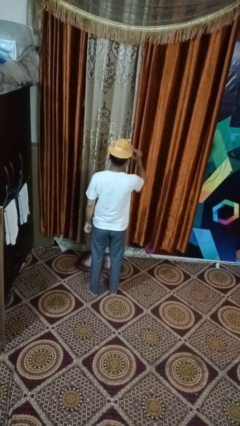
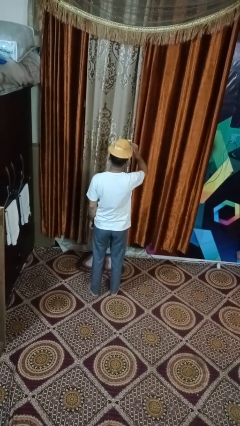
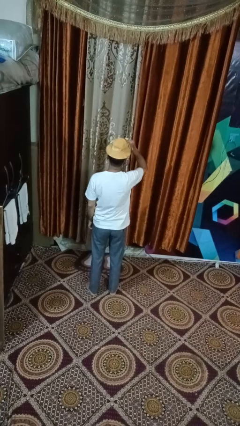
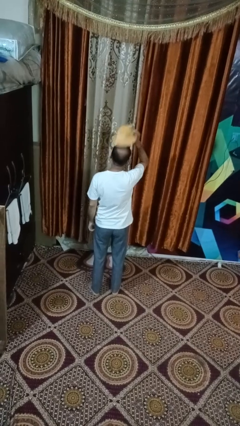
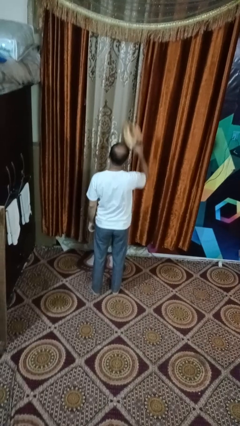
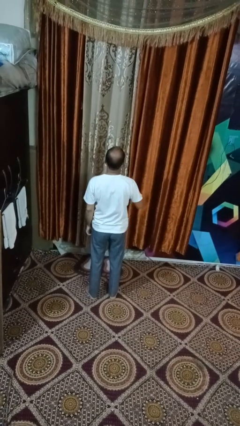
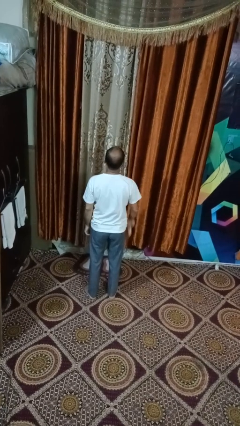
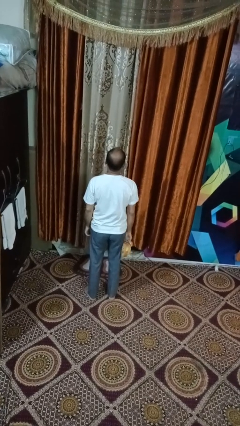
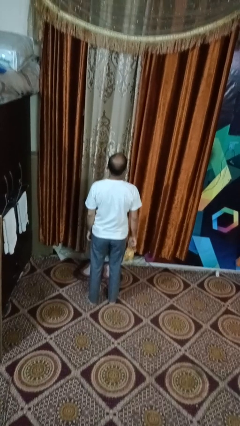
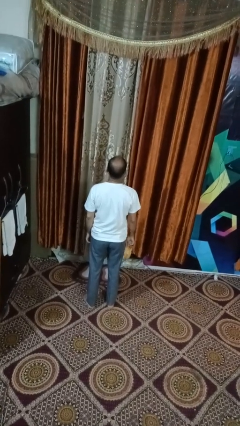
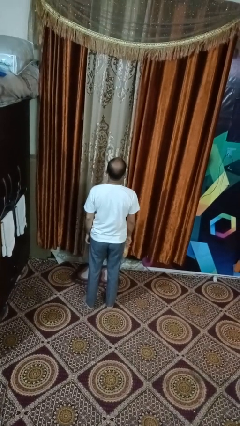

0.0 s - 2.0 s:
person takes off hat

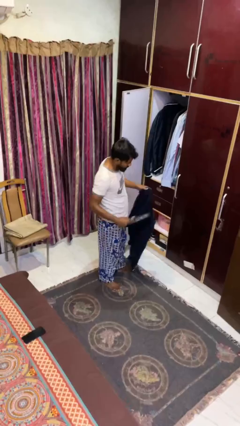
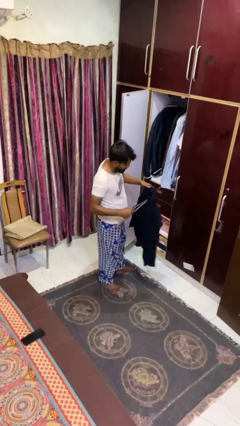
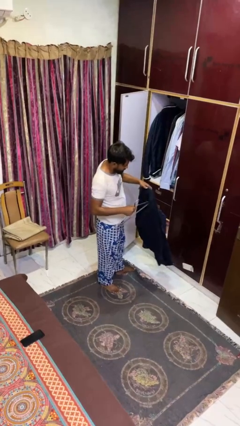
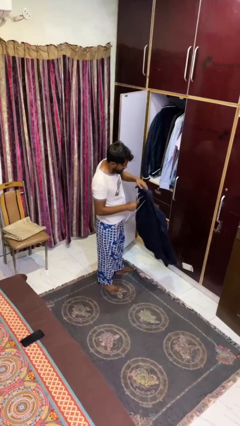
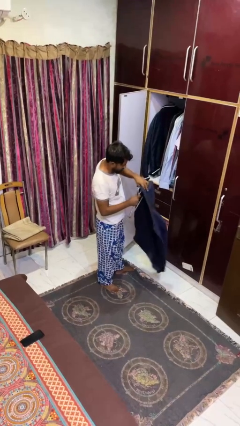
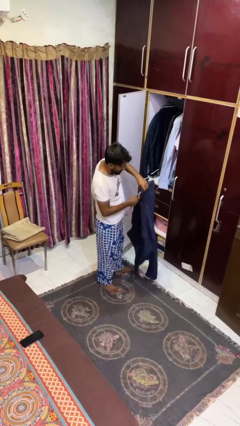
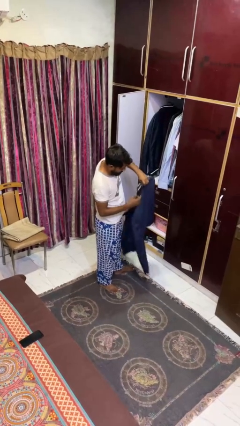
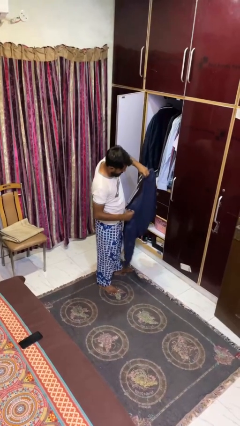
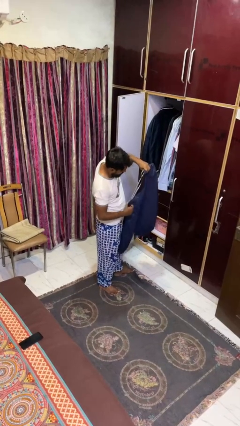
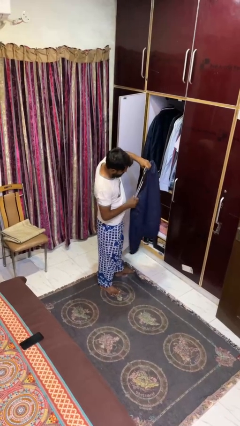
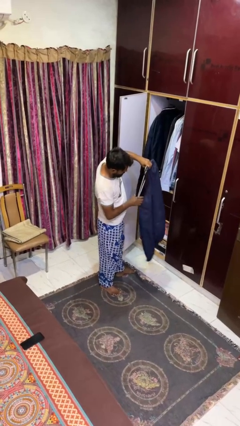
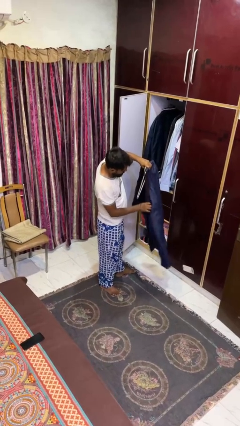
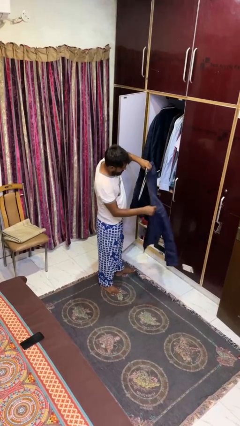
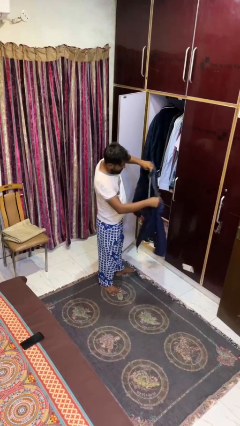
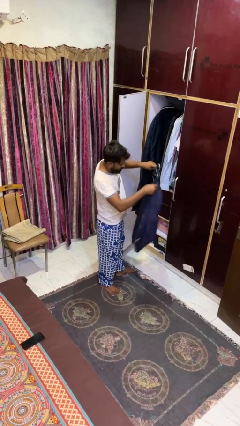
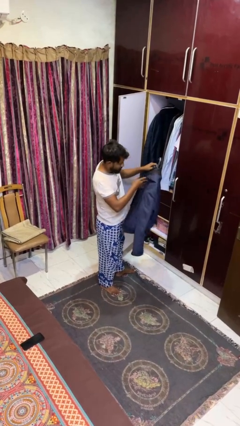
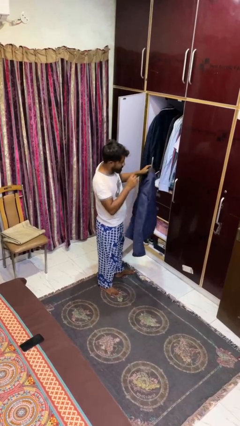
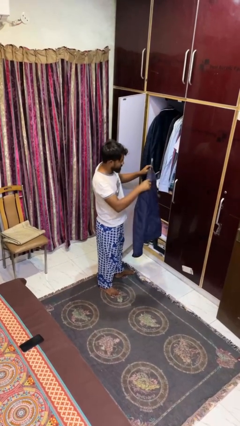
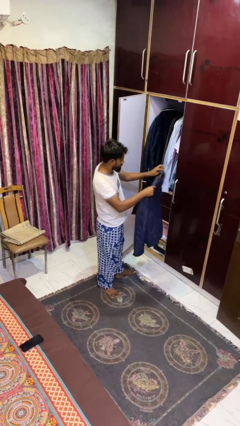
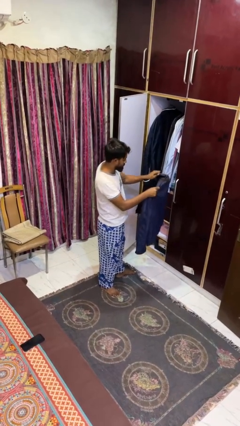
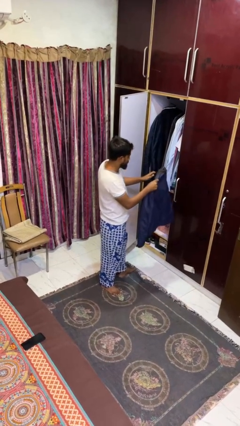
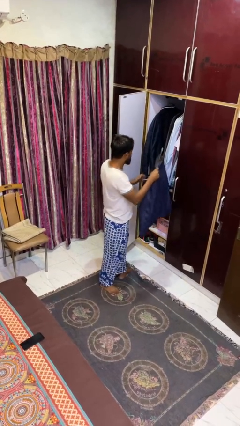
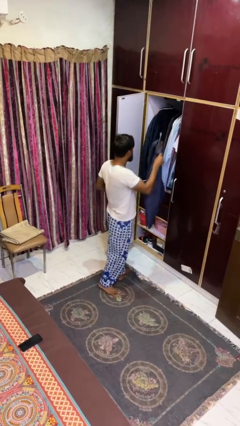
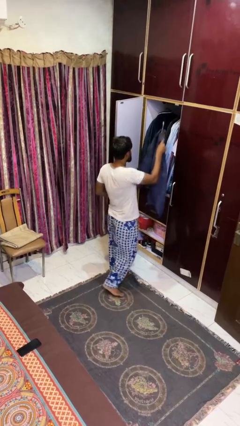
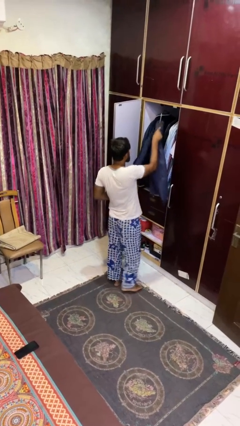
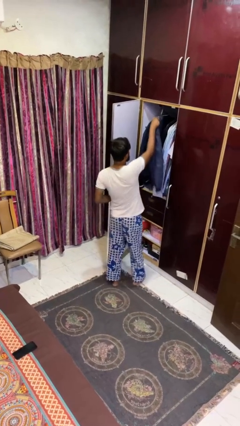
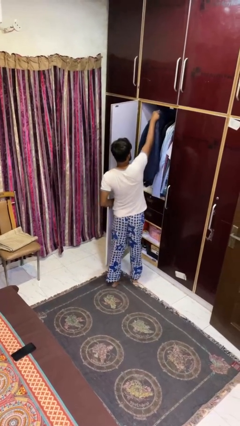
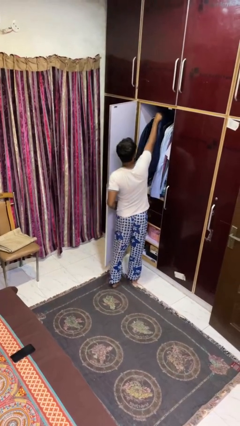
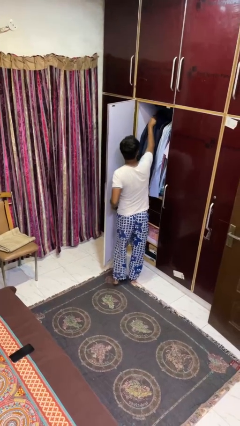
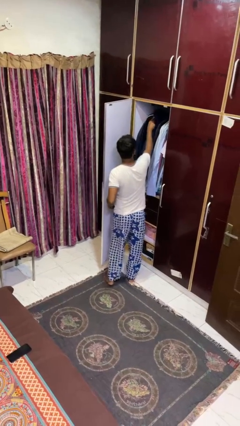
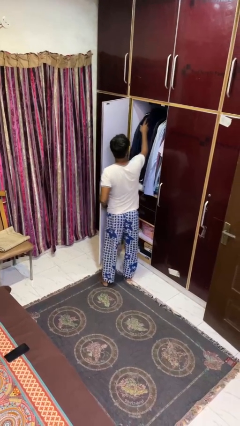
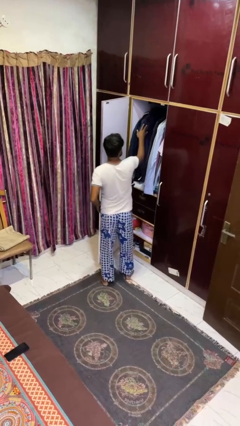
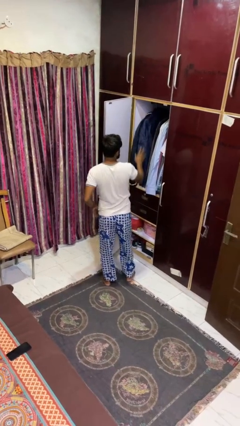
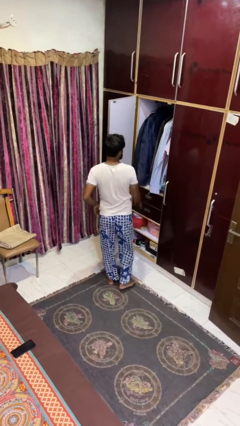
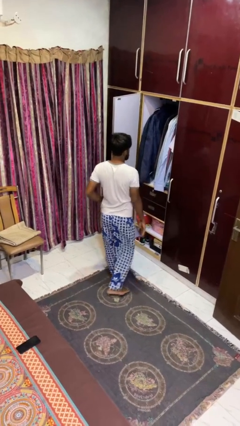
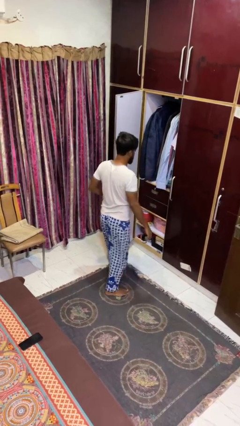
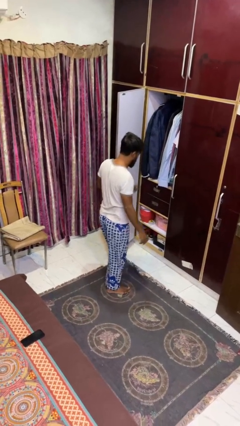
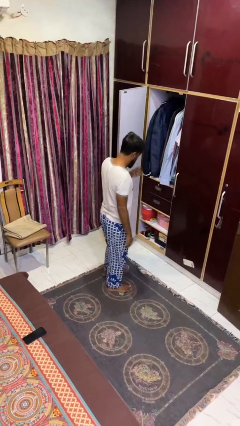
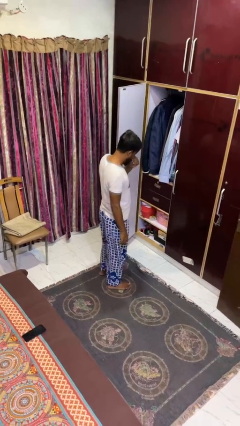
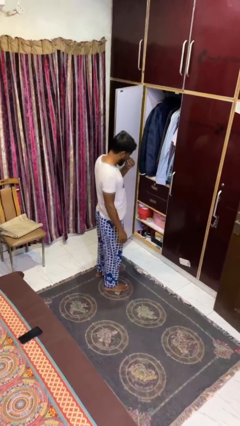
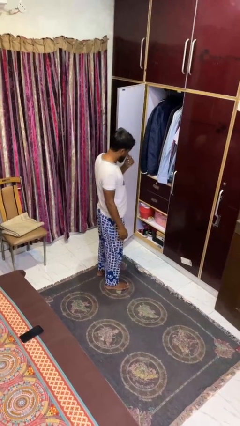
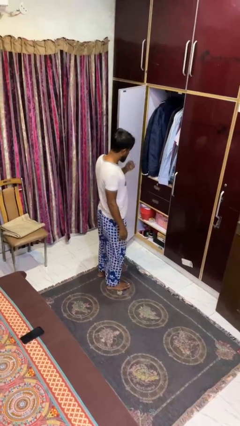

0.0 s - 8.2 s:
person puts clothes into closet

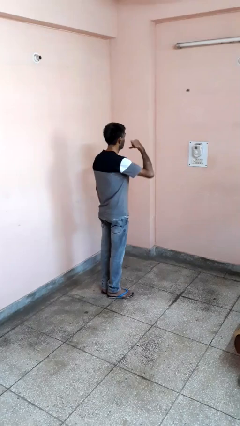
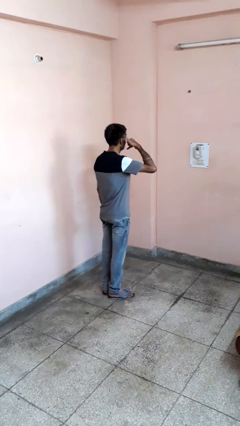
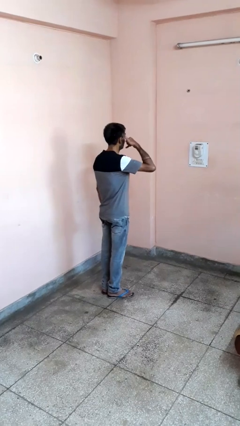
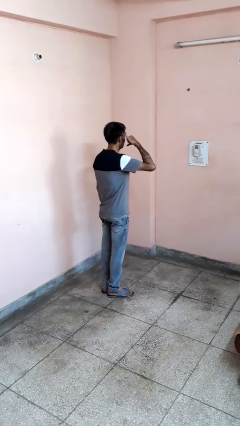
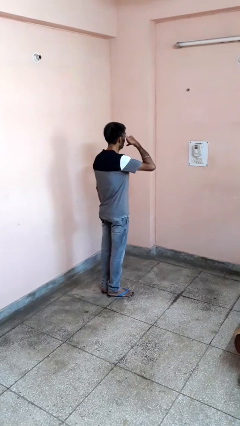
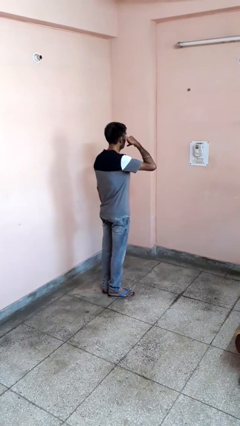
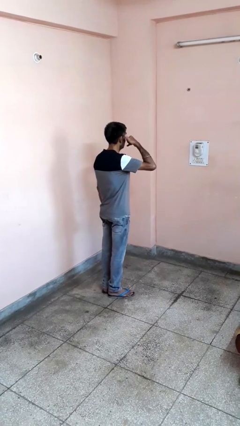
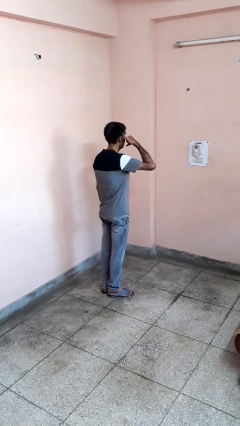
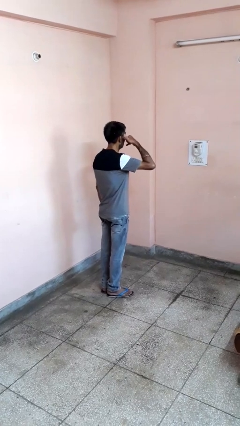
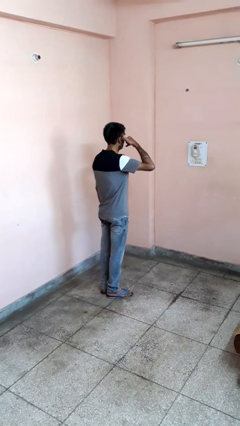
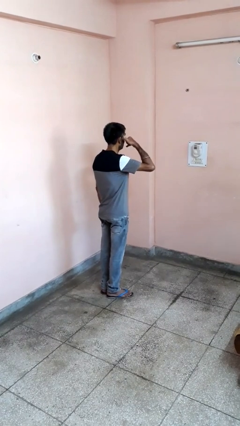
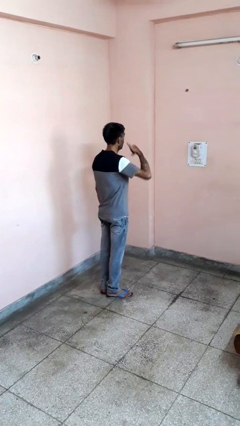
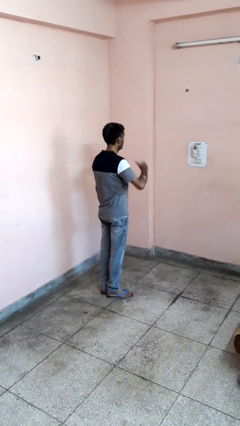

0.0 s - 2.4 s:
person gestures call me

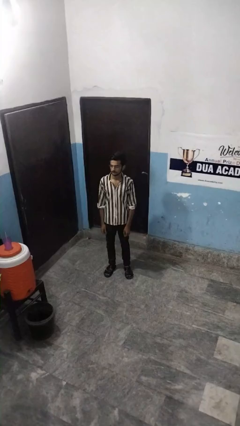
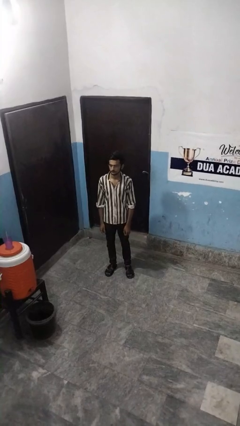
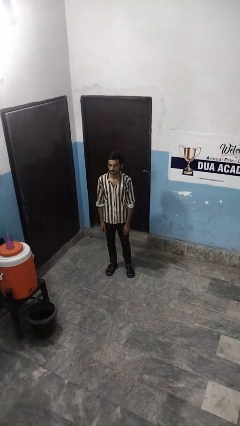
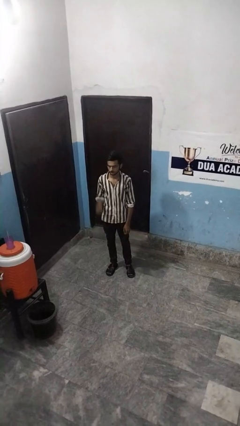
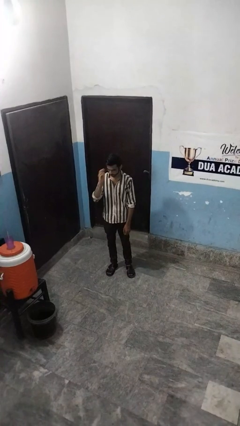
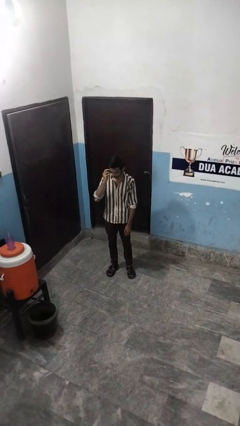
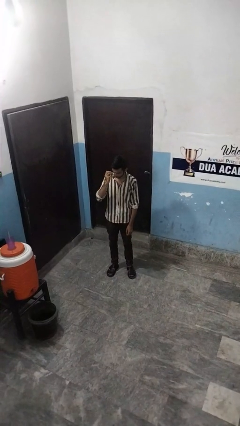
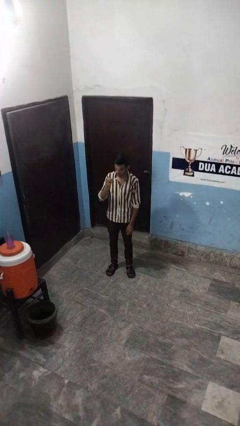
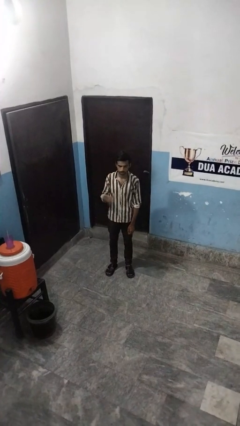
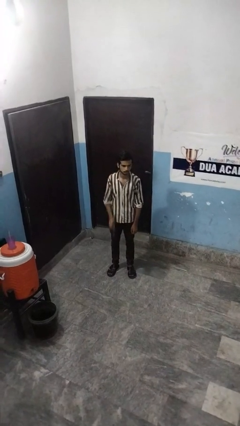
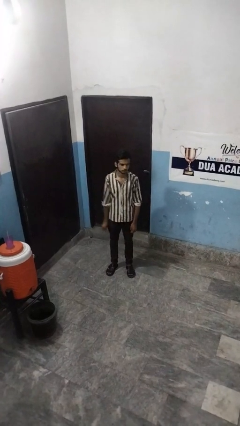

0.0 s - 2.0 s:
person takes off glasses

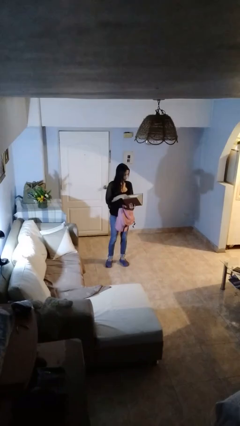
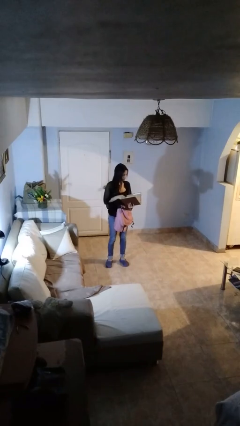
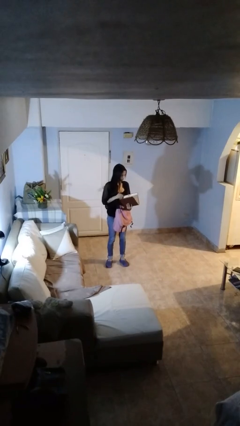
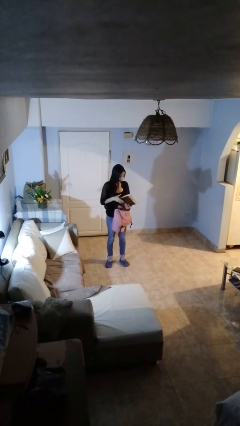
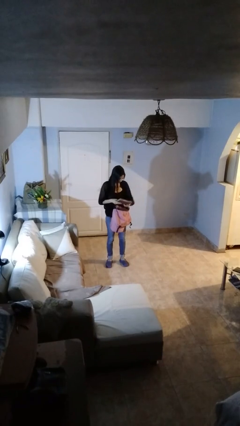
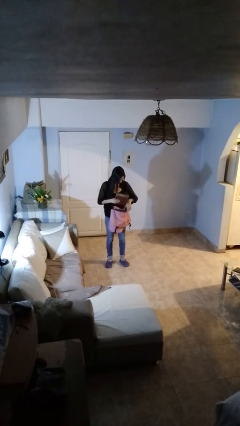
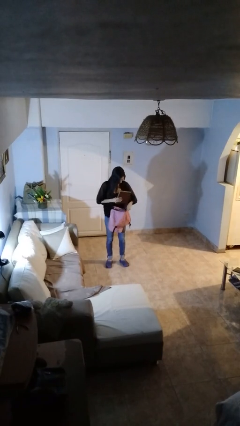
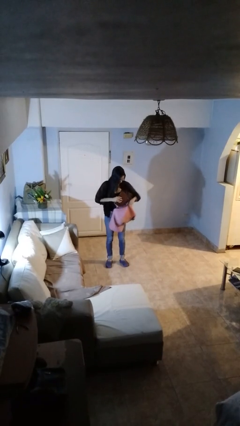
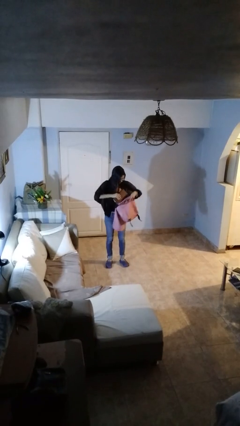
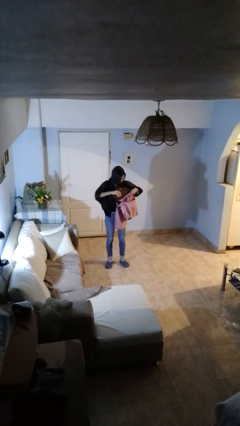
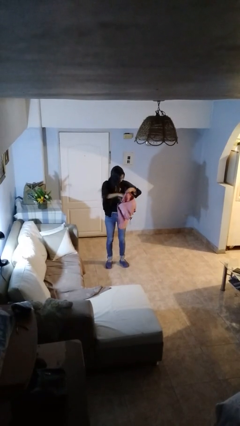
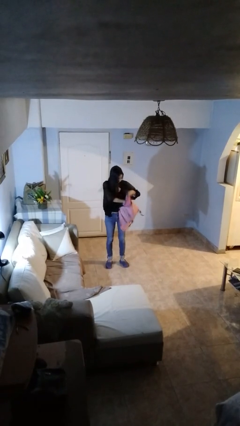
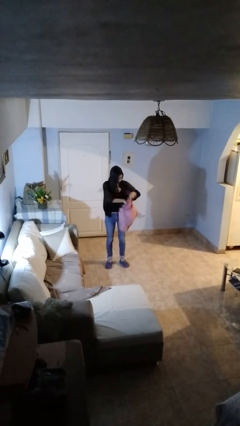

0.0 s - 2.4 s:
person puts object into backpack

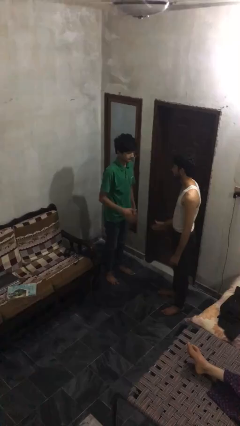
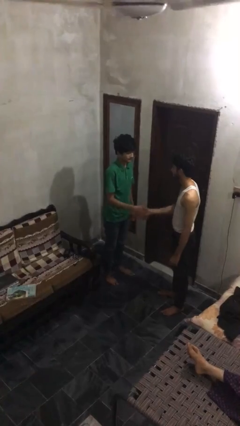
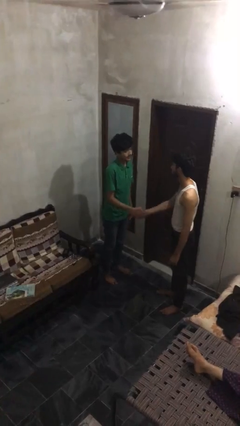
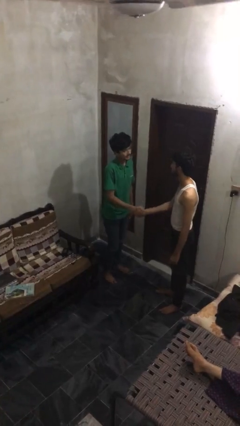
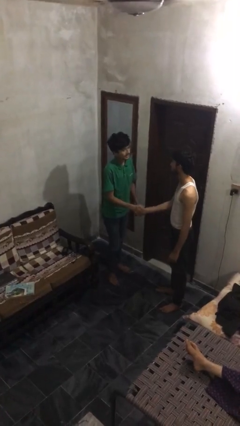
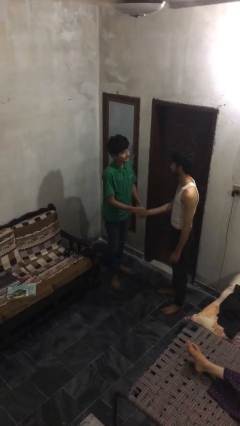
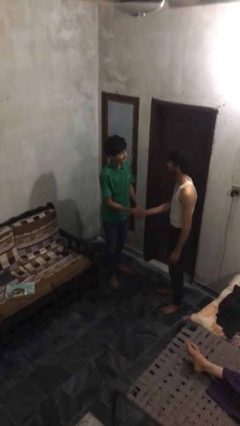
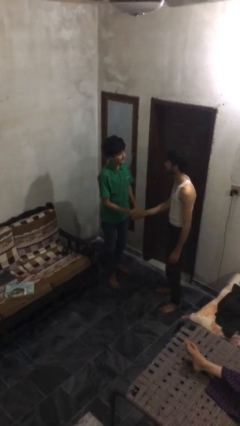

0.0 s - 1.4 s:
person shakes hand
